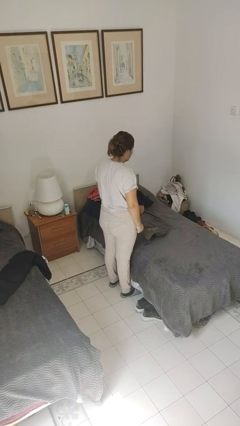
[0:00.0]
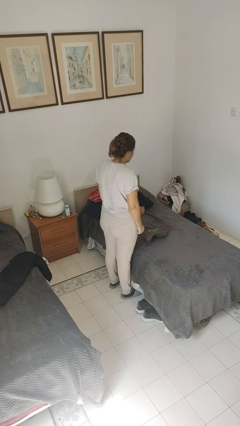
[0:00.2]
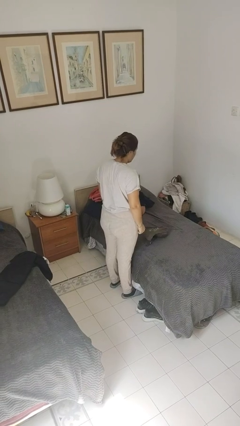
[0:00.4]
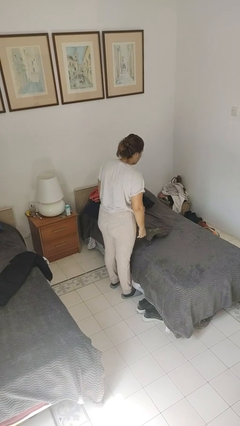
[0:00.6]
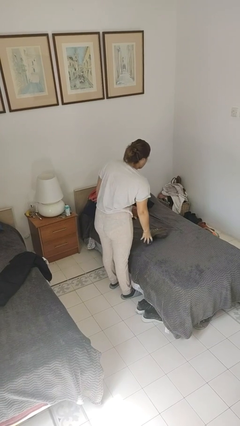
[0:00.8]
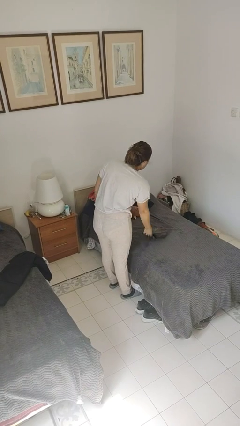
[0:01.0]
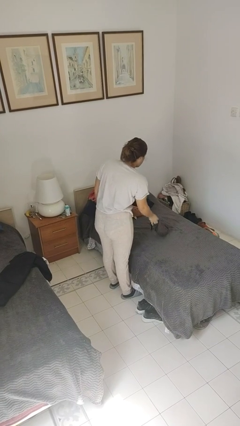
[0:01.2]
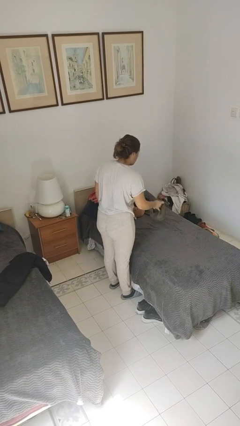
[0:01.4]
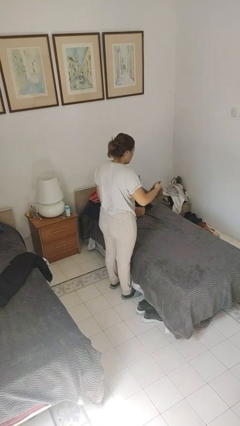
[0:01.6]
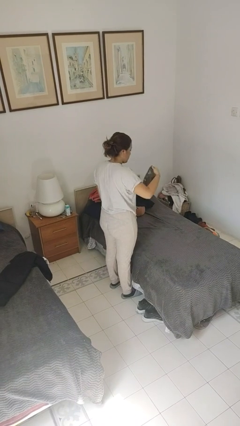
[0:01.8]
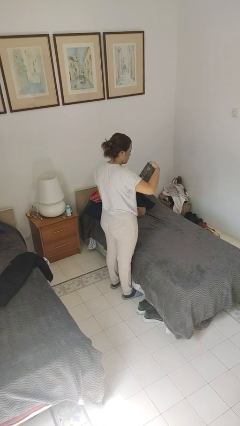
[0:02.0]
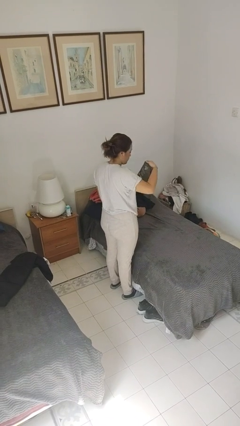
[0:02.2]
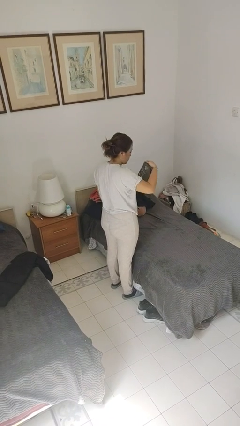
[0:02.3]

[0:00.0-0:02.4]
person picks up object from bed

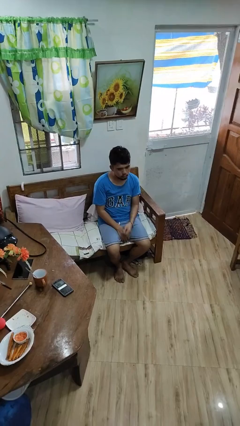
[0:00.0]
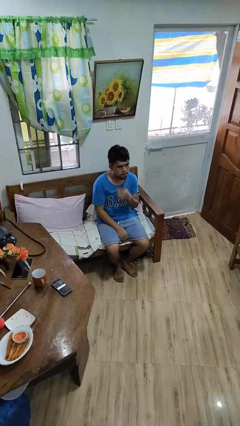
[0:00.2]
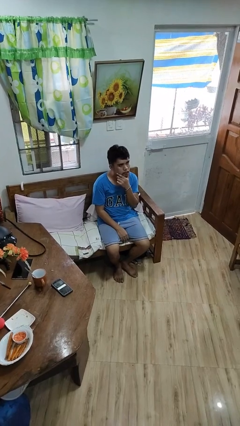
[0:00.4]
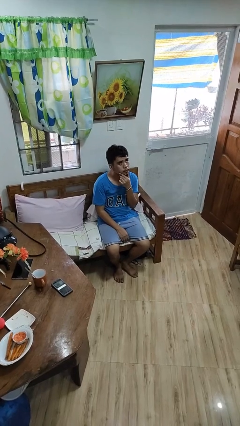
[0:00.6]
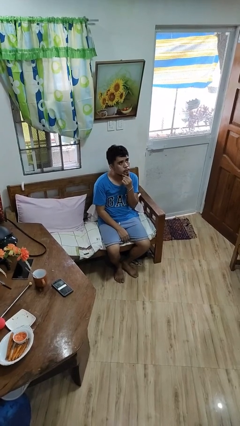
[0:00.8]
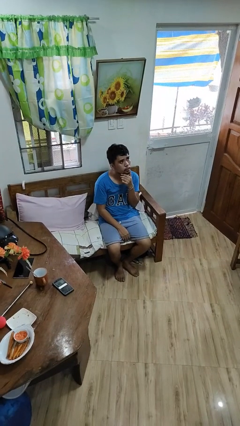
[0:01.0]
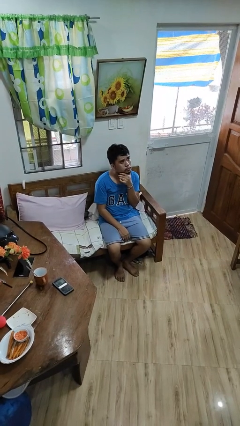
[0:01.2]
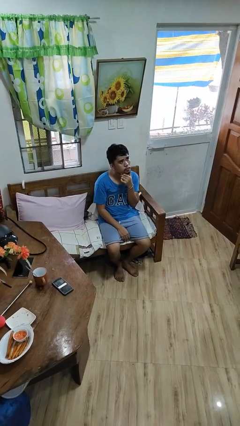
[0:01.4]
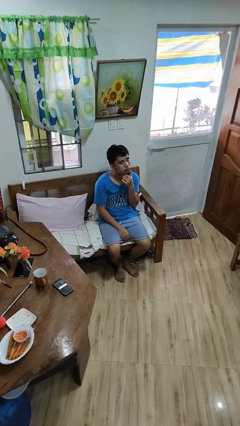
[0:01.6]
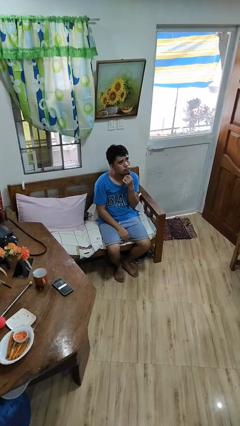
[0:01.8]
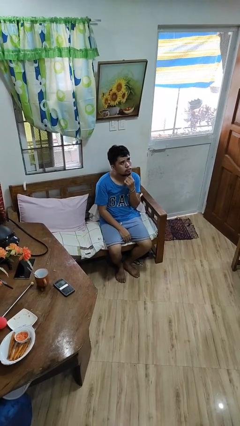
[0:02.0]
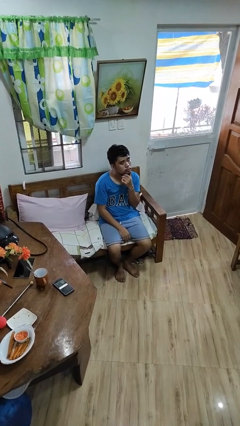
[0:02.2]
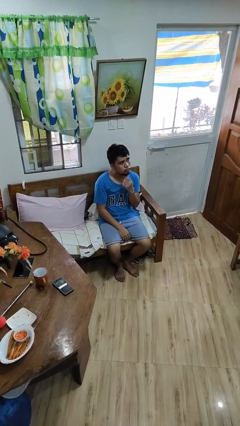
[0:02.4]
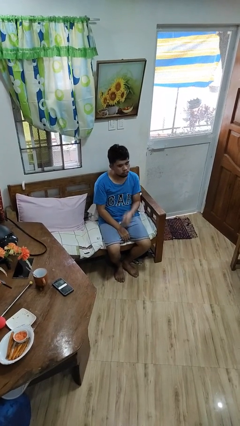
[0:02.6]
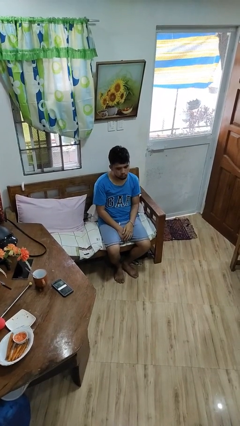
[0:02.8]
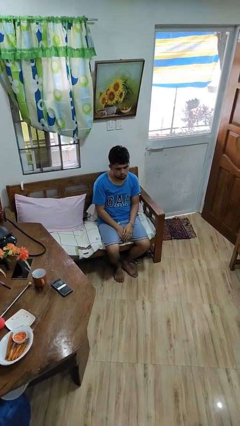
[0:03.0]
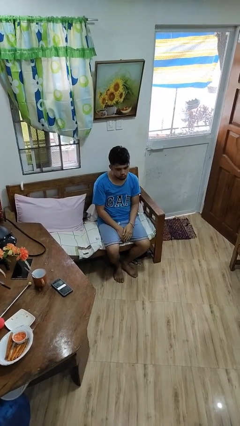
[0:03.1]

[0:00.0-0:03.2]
person strokes chin

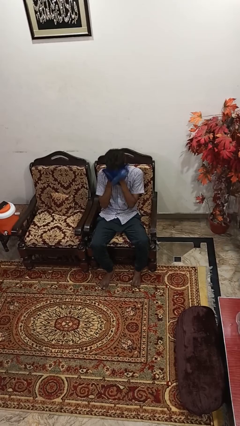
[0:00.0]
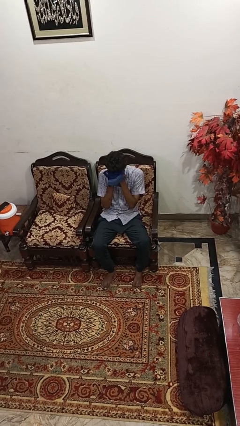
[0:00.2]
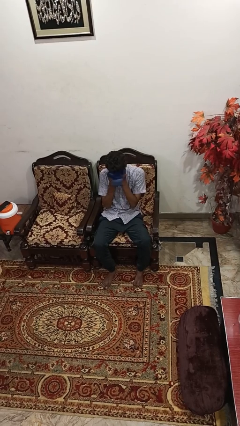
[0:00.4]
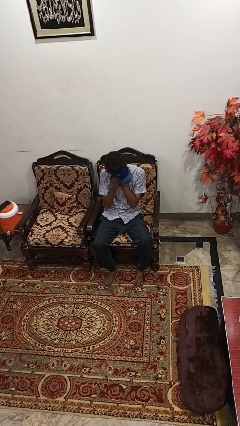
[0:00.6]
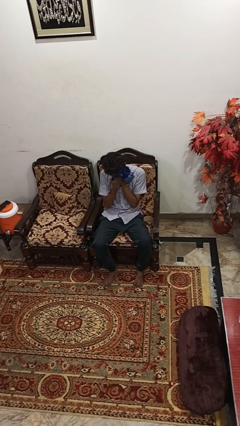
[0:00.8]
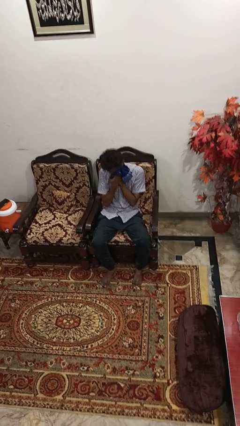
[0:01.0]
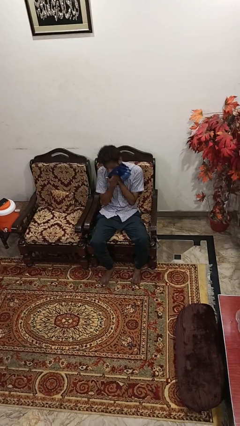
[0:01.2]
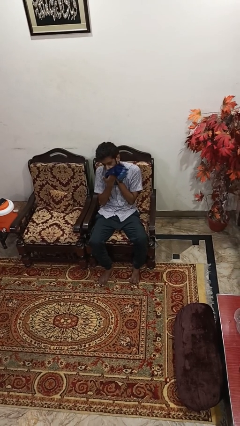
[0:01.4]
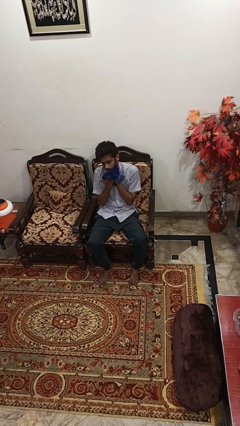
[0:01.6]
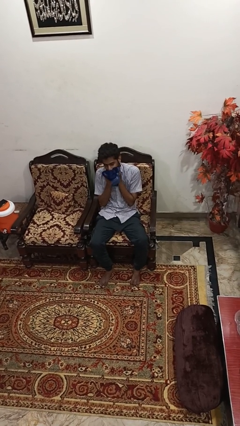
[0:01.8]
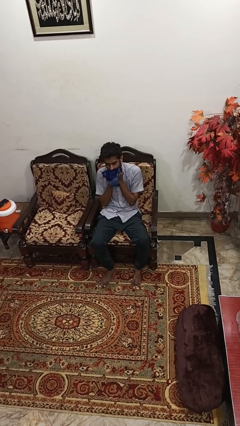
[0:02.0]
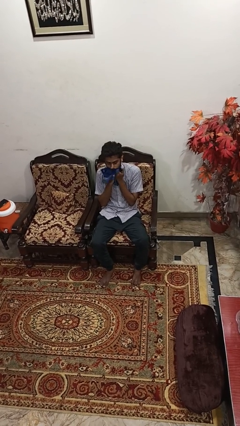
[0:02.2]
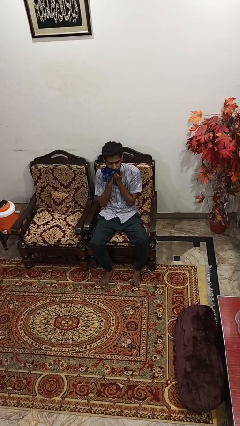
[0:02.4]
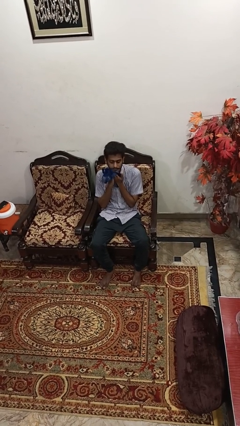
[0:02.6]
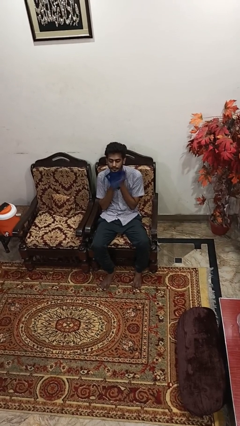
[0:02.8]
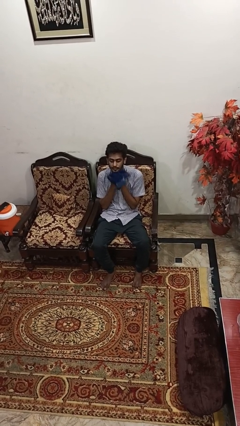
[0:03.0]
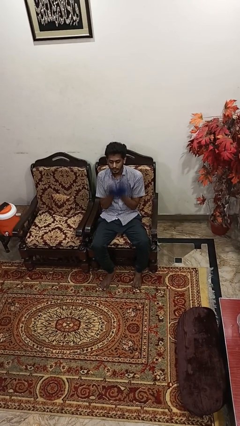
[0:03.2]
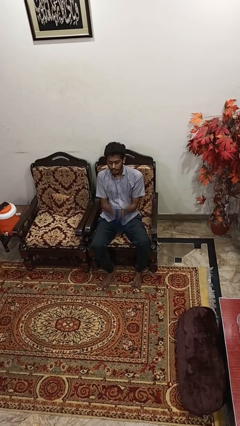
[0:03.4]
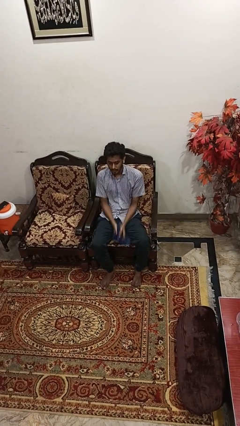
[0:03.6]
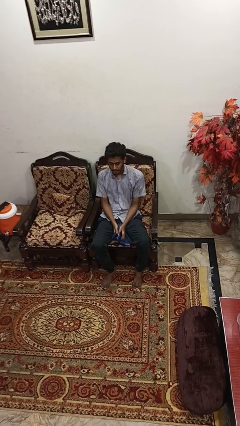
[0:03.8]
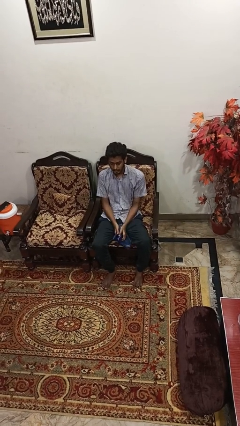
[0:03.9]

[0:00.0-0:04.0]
person wipes mouth with napkin

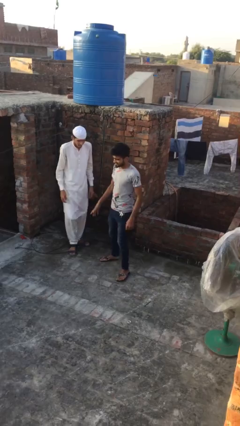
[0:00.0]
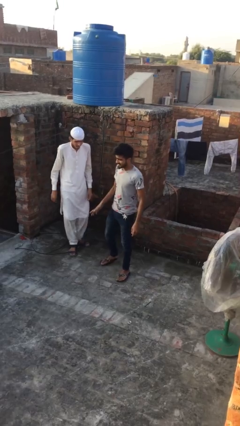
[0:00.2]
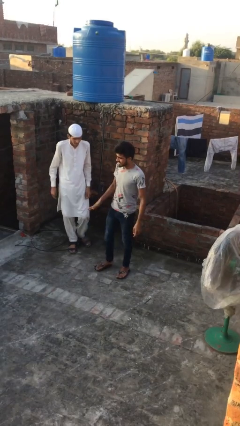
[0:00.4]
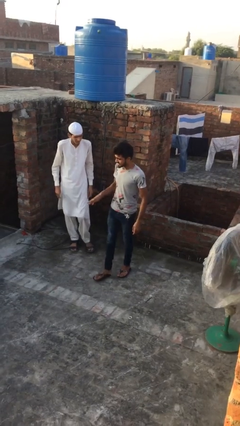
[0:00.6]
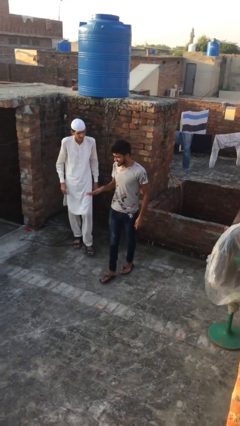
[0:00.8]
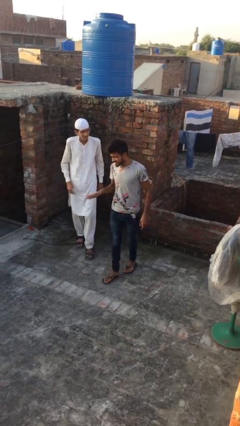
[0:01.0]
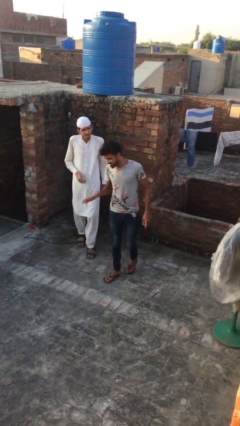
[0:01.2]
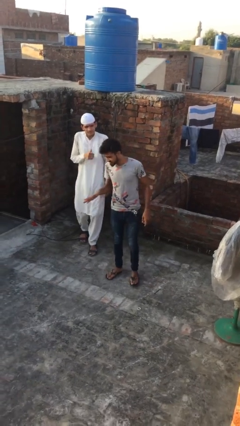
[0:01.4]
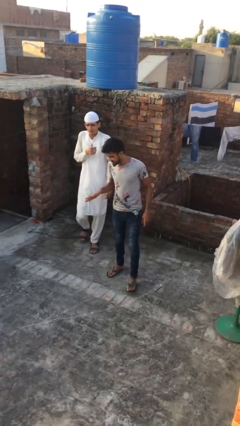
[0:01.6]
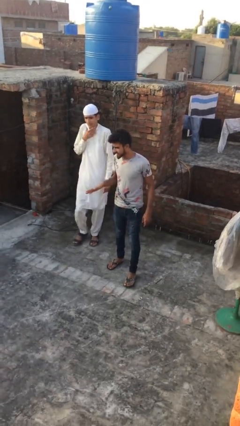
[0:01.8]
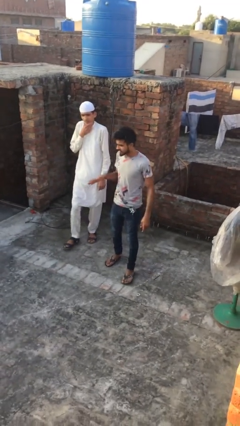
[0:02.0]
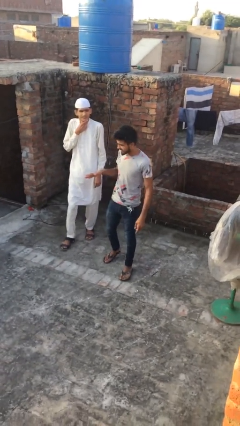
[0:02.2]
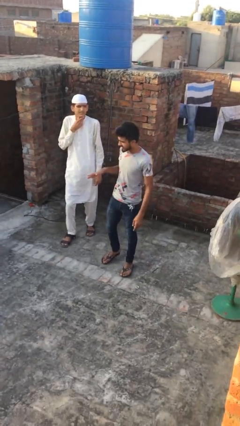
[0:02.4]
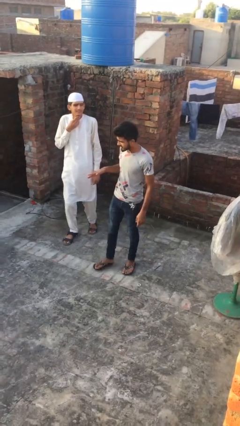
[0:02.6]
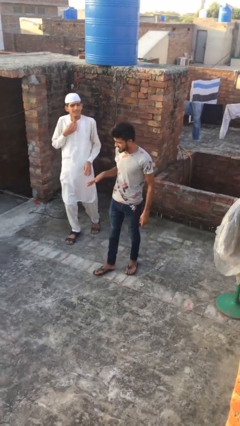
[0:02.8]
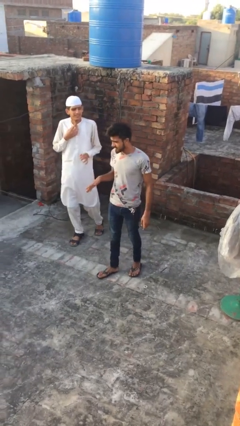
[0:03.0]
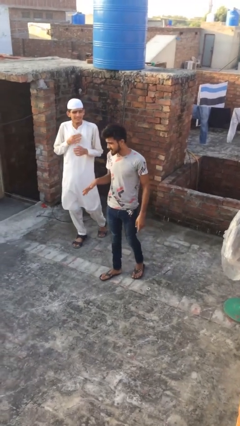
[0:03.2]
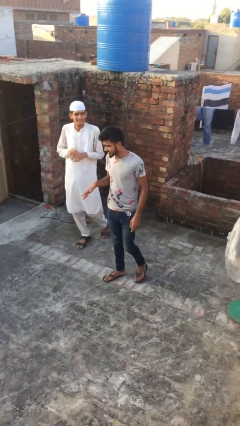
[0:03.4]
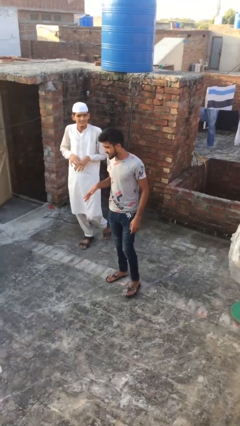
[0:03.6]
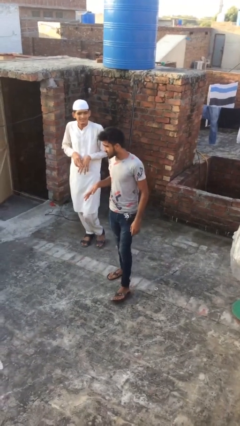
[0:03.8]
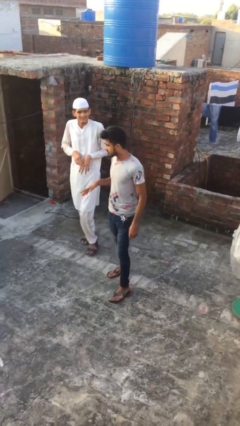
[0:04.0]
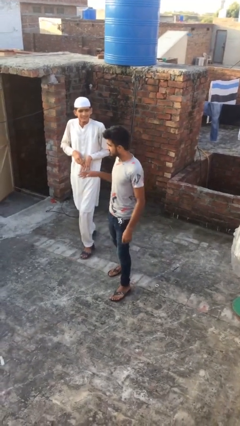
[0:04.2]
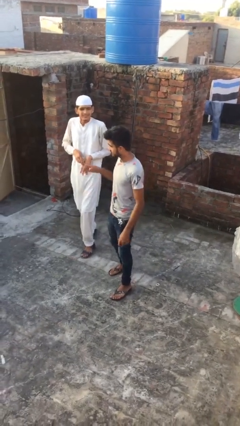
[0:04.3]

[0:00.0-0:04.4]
person talks to person

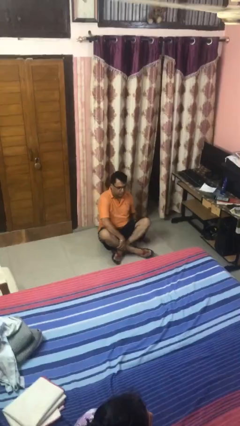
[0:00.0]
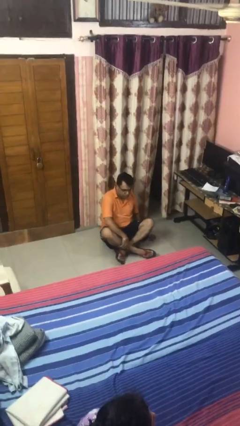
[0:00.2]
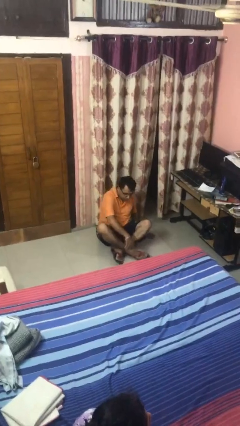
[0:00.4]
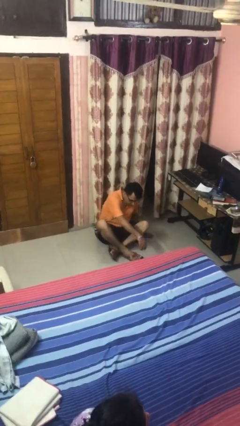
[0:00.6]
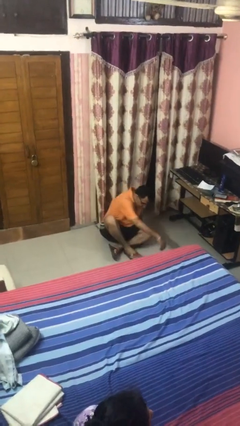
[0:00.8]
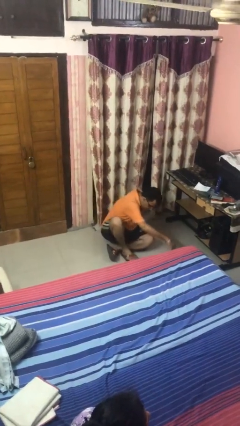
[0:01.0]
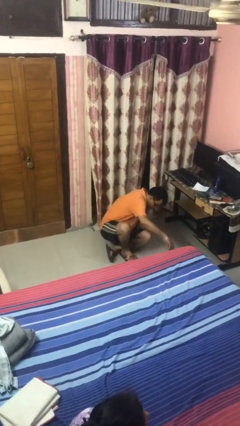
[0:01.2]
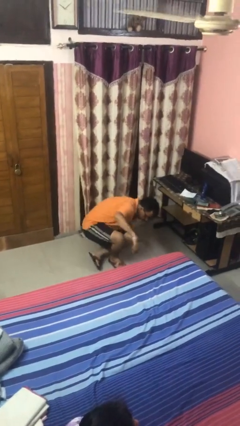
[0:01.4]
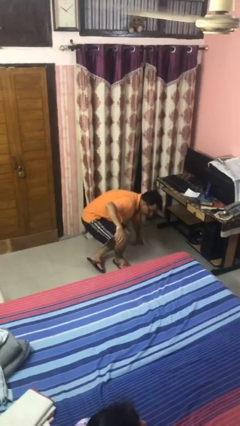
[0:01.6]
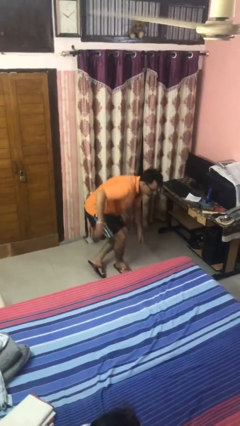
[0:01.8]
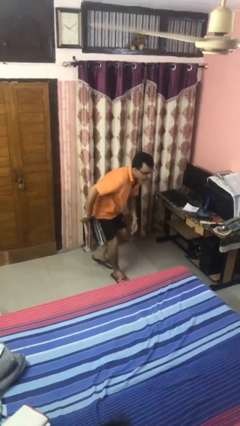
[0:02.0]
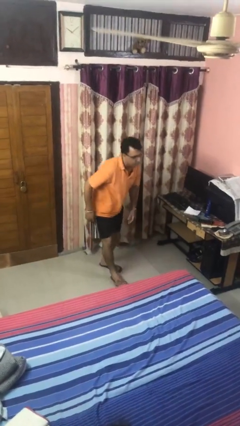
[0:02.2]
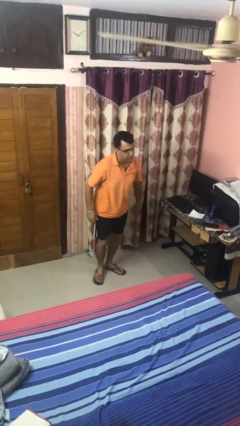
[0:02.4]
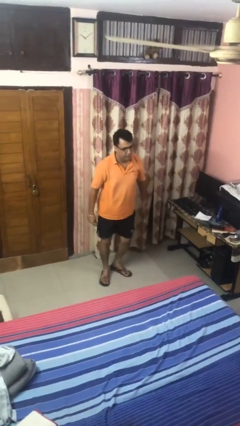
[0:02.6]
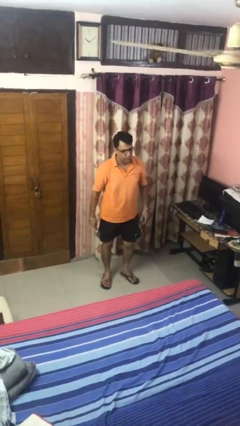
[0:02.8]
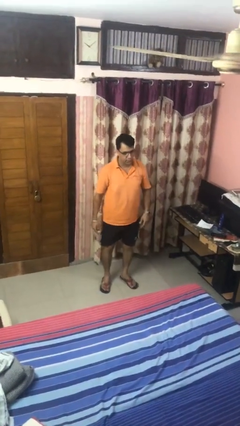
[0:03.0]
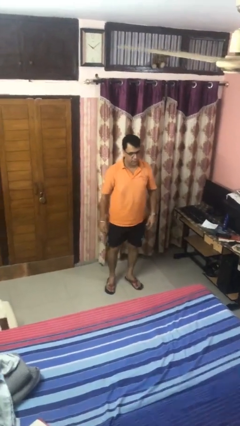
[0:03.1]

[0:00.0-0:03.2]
person stands up from floor

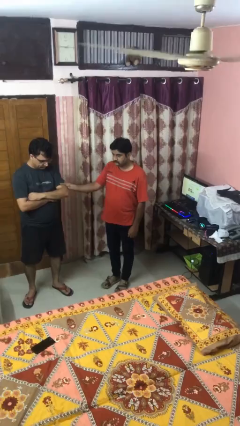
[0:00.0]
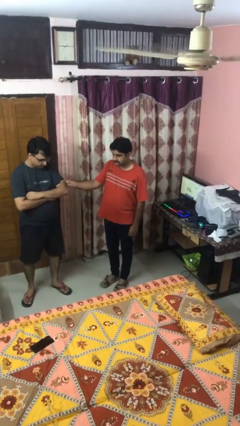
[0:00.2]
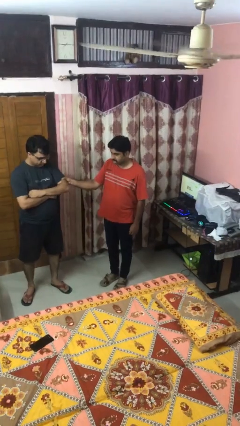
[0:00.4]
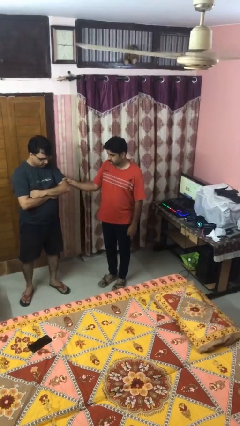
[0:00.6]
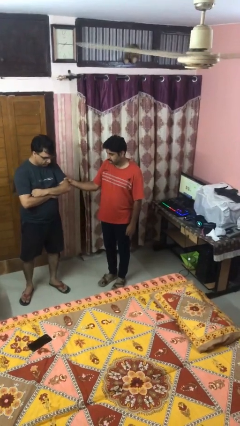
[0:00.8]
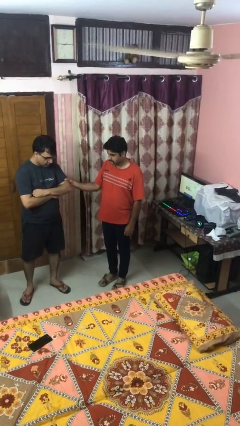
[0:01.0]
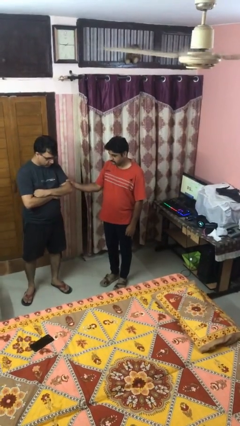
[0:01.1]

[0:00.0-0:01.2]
person grabs person by bicep
